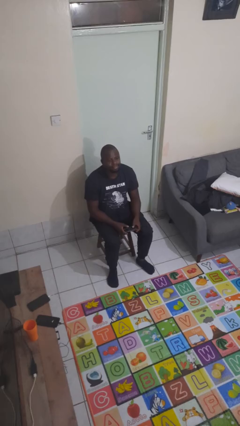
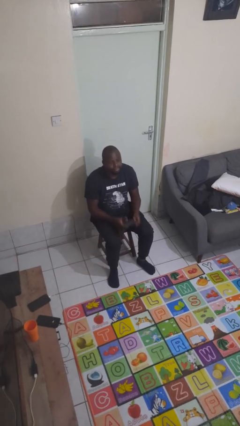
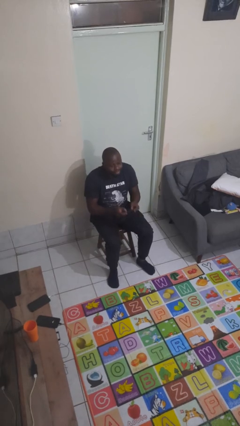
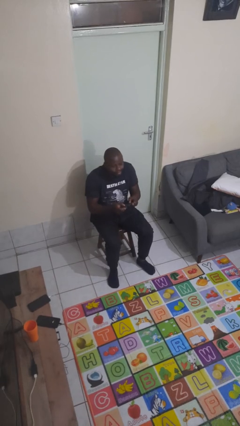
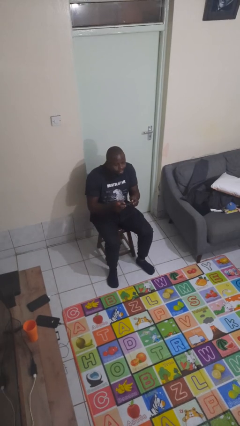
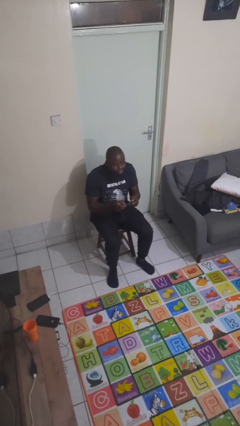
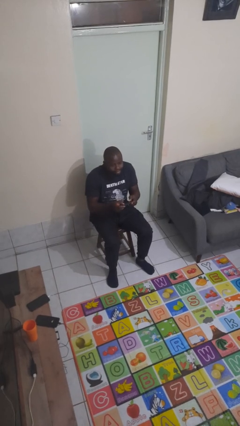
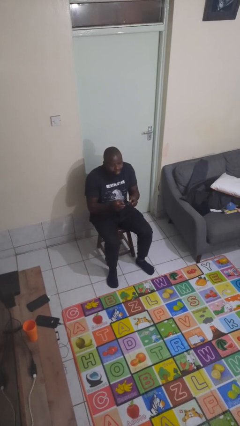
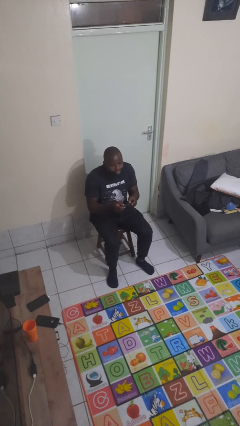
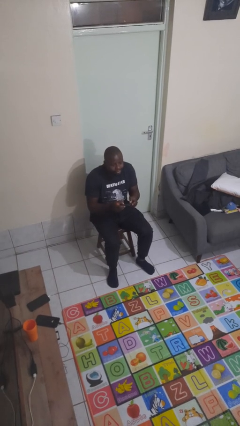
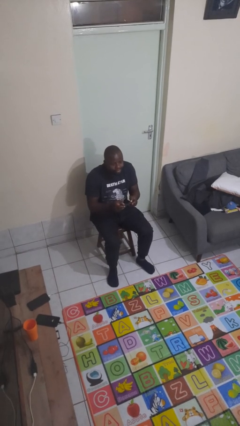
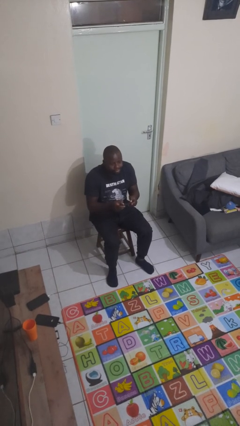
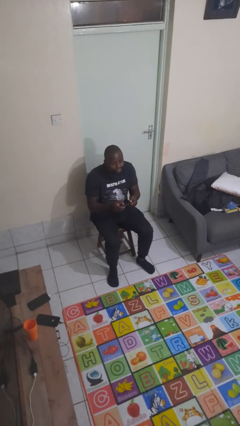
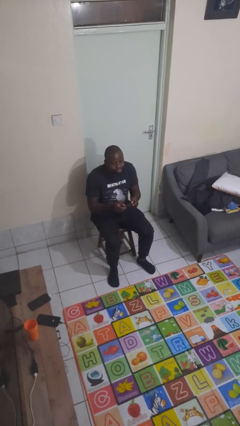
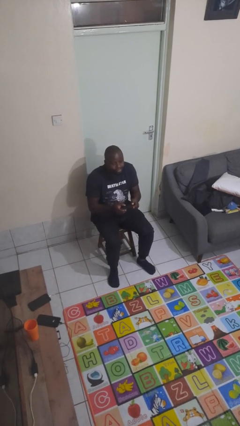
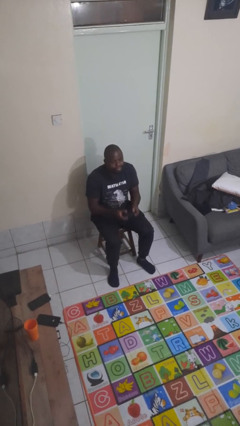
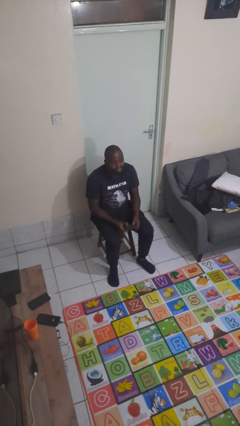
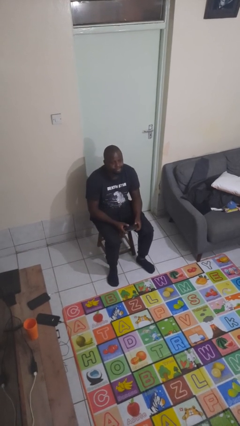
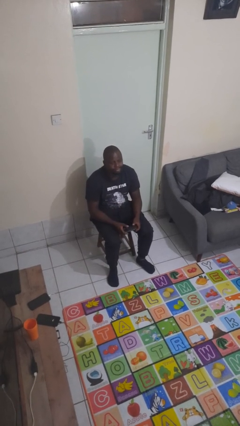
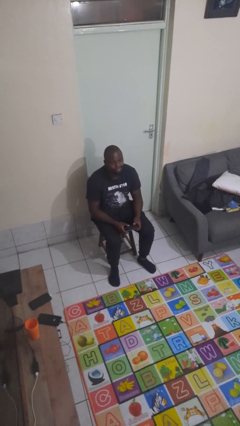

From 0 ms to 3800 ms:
person interacts with handheld game

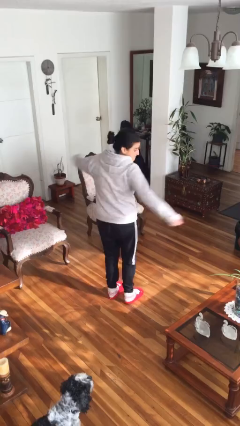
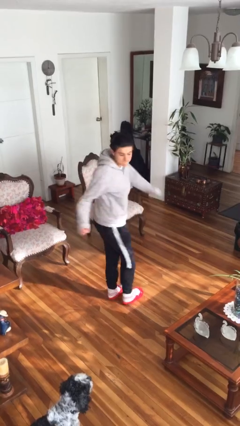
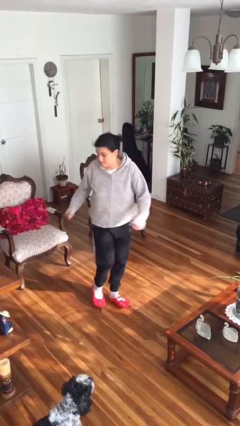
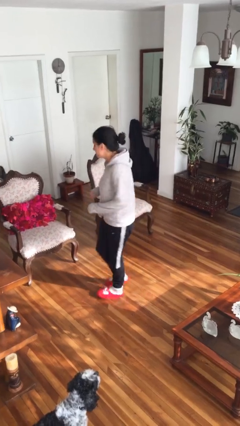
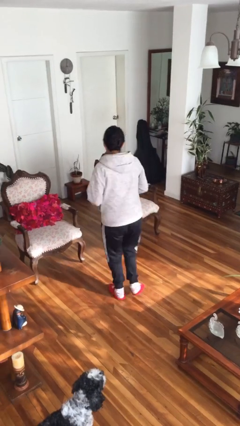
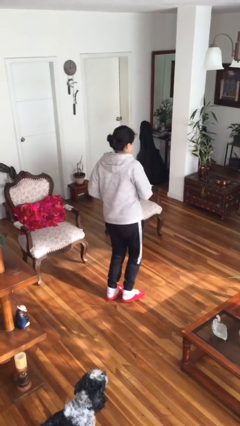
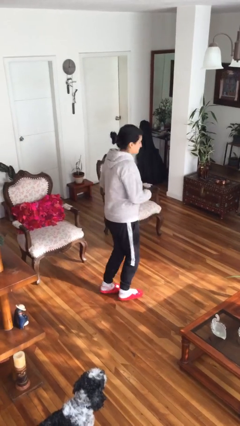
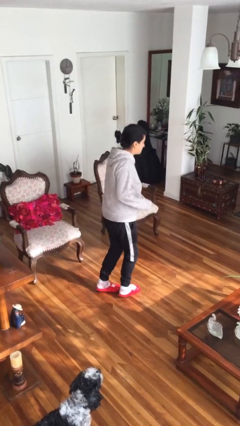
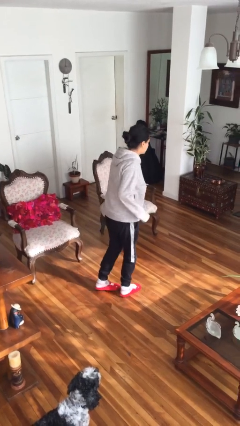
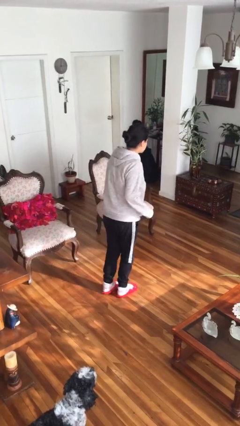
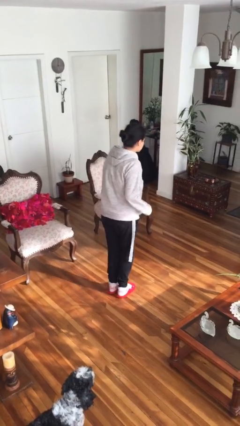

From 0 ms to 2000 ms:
person twirls

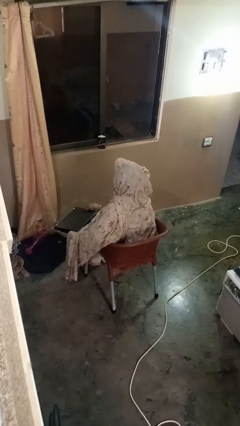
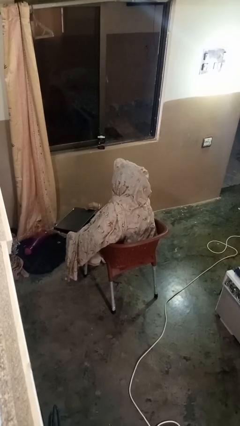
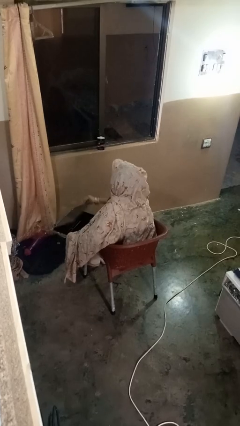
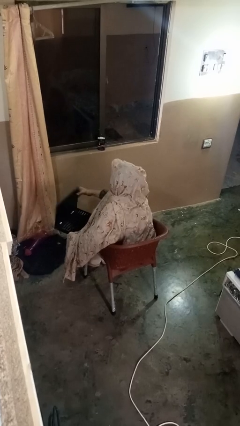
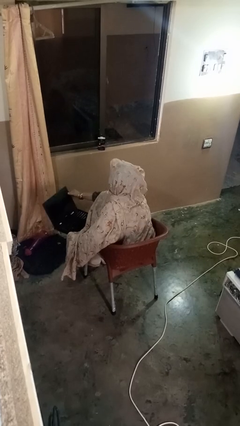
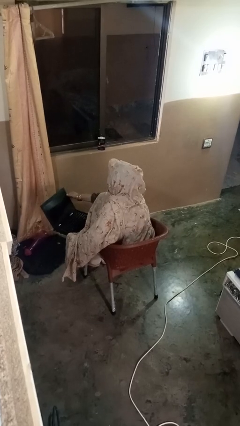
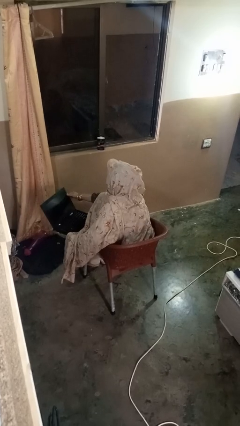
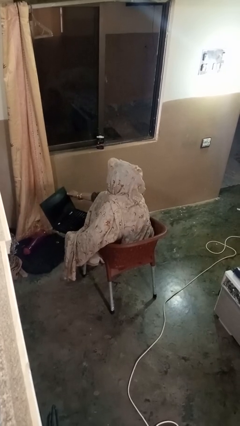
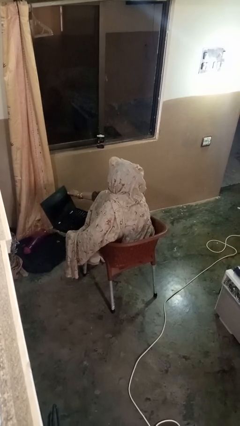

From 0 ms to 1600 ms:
person opens laptop

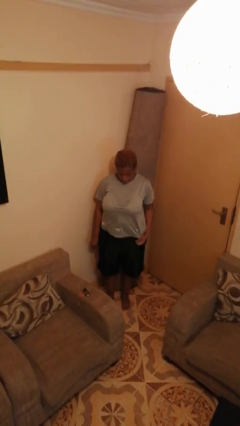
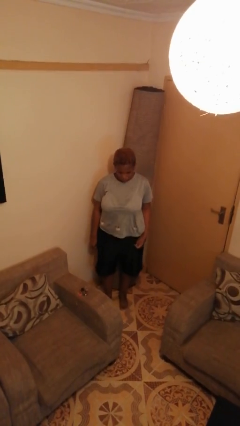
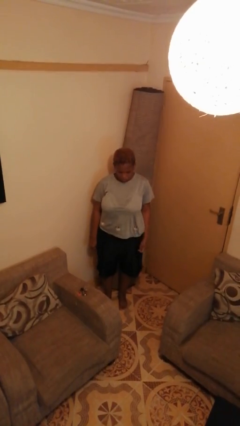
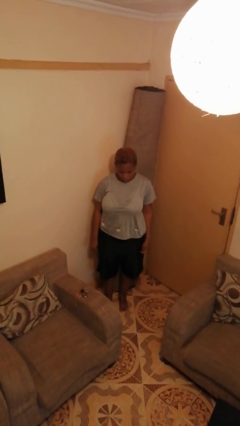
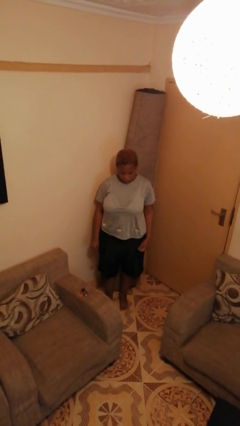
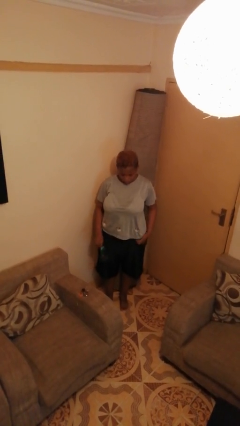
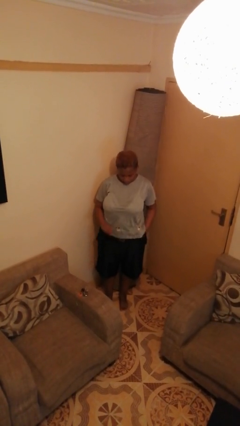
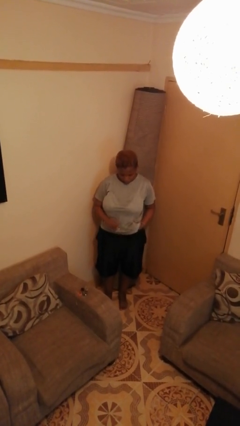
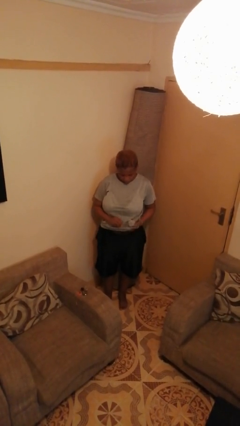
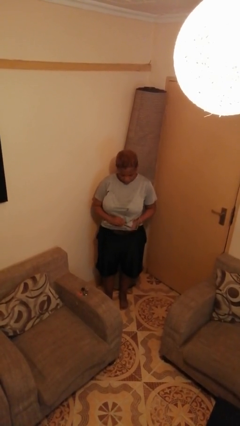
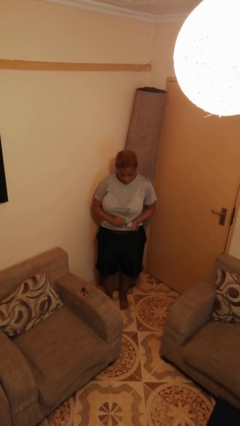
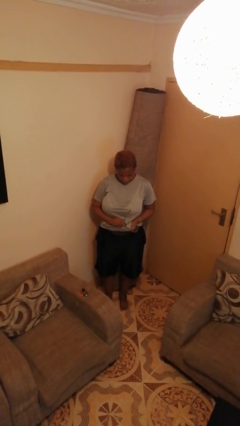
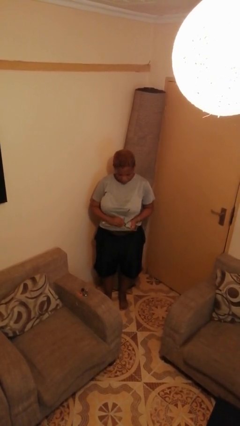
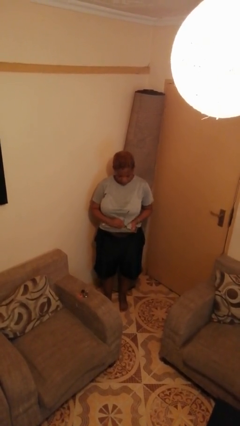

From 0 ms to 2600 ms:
person cleans eyeglasses

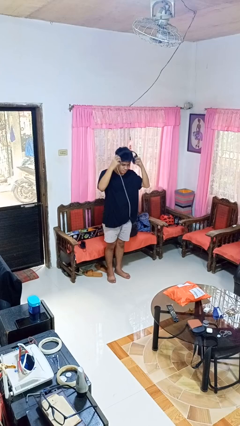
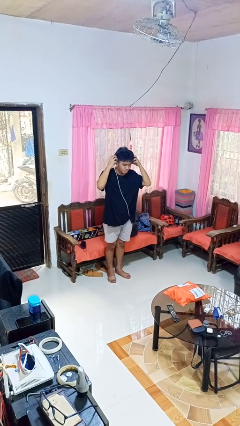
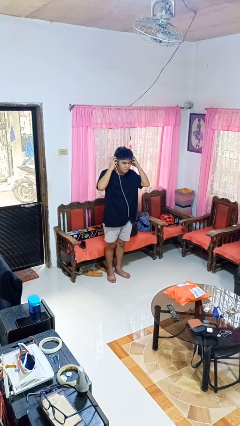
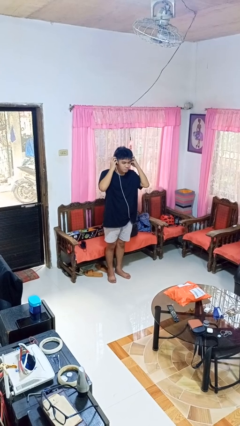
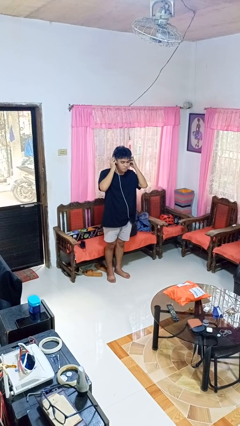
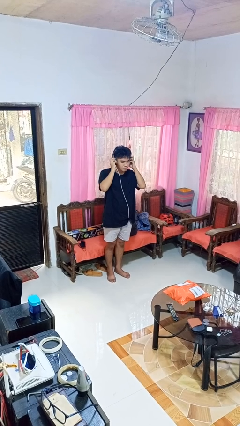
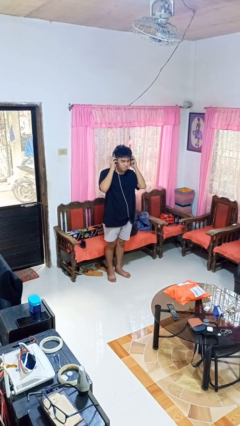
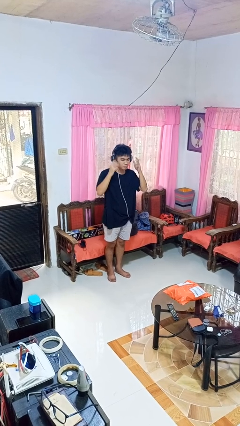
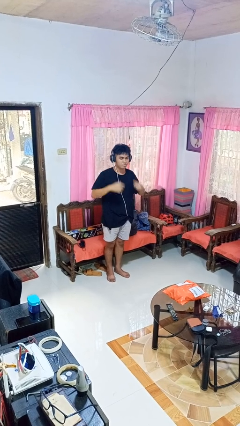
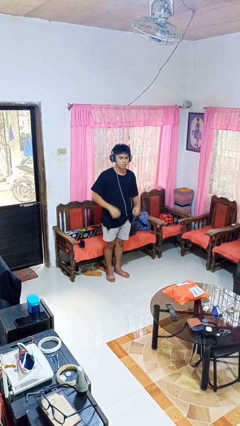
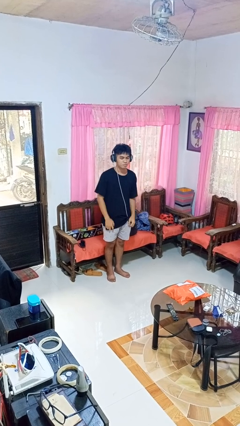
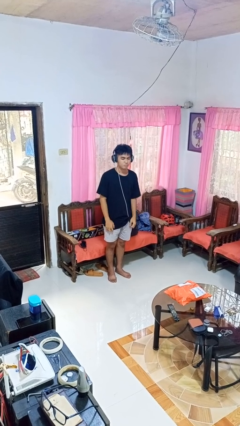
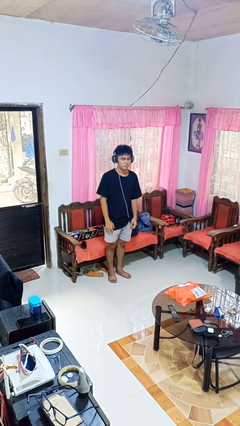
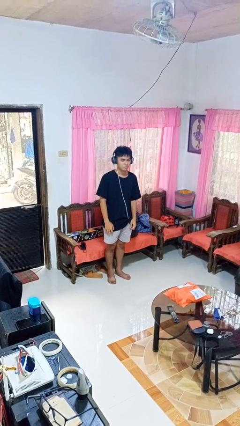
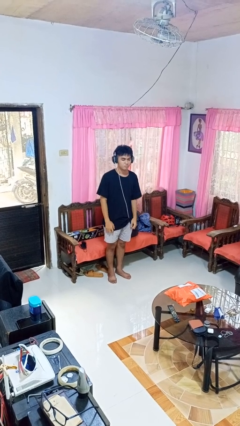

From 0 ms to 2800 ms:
person puts on headphones

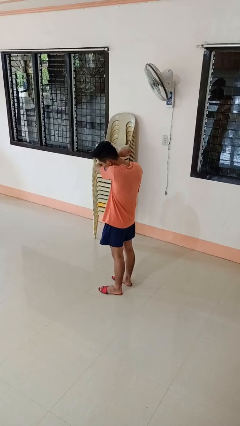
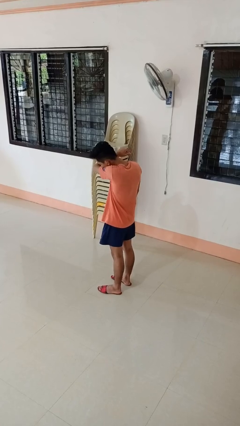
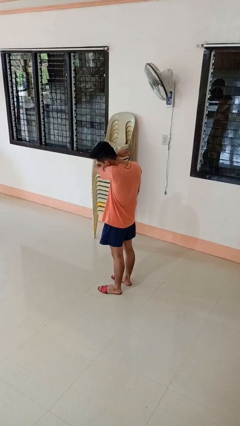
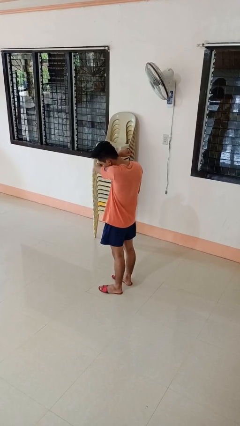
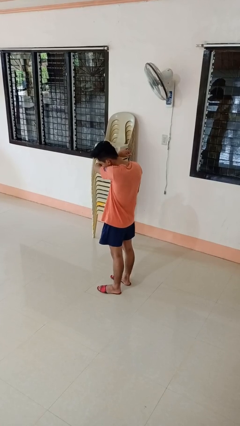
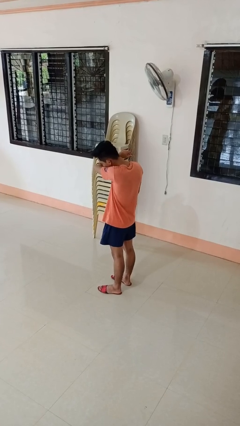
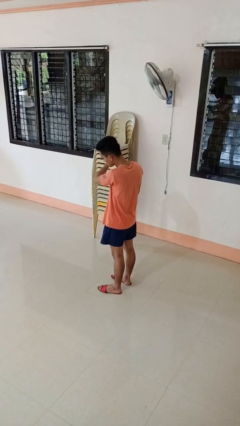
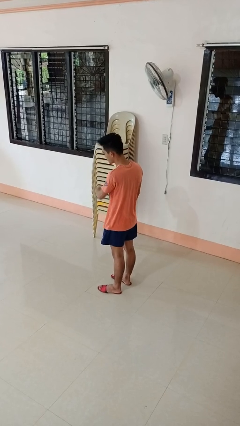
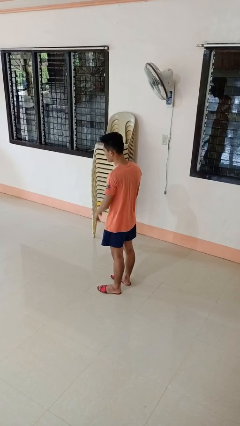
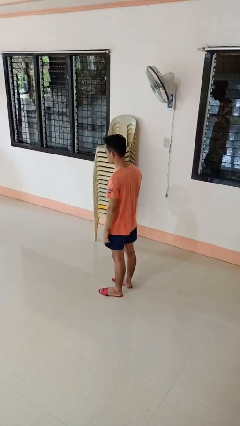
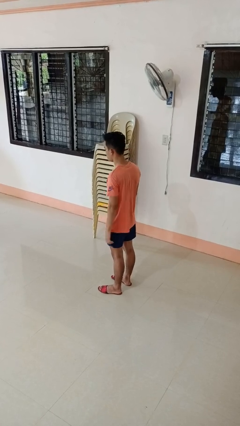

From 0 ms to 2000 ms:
person sneezes into arm

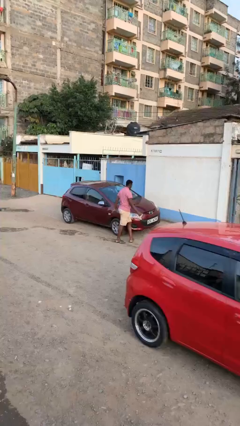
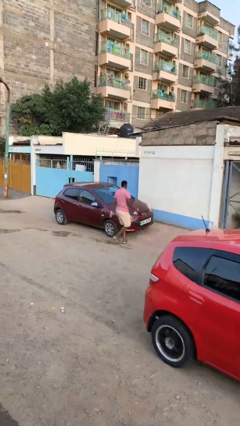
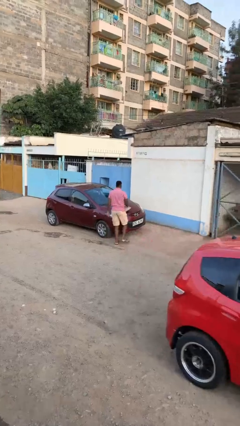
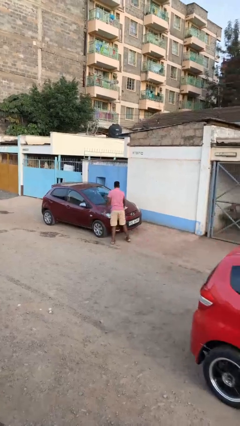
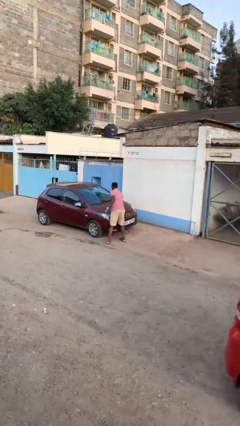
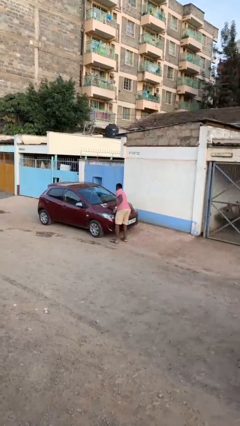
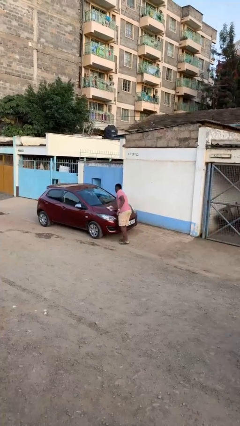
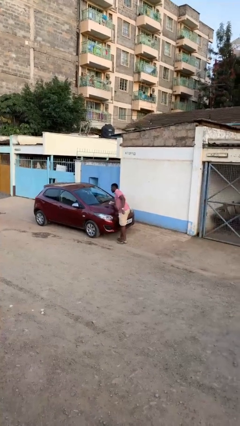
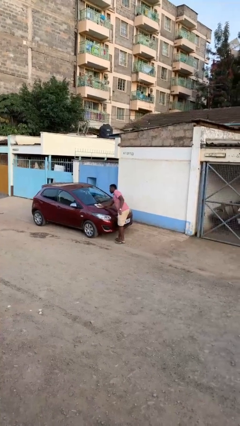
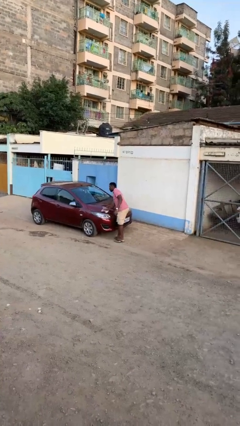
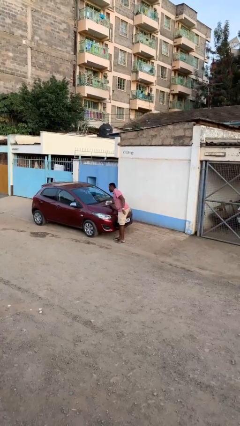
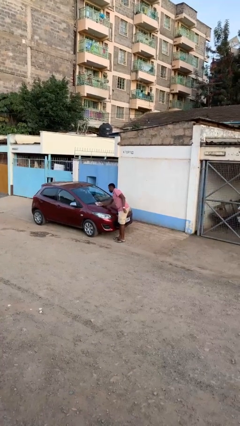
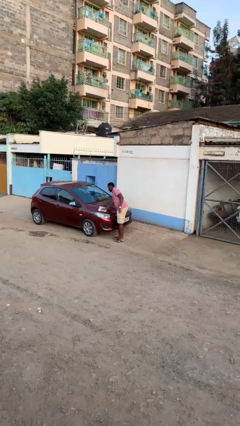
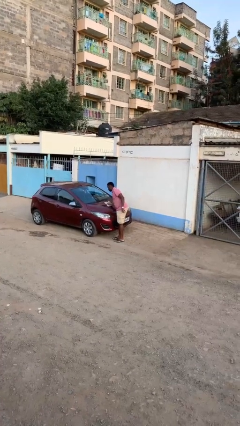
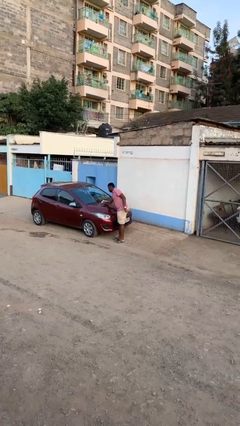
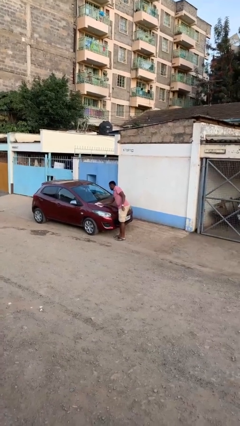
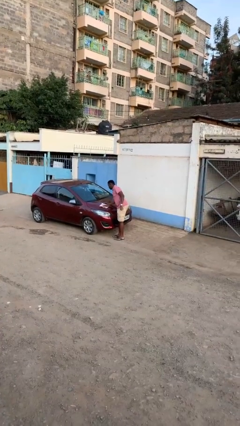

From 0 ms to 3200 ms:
person polishes car with rag
